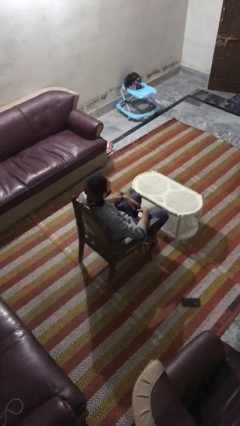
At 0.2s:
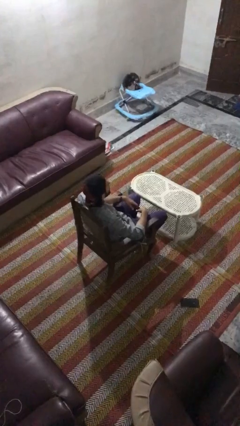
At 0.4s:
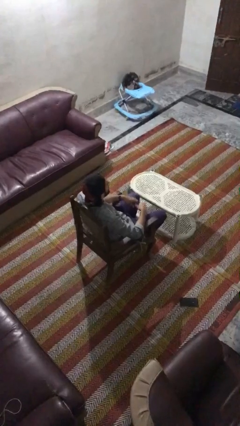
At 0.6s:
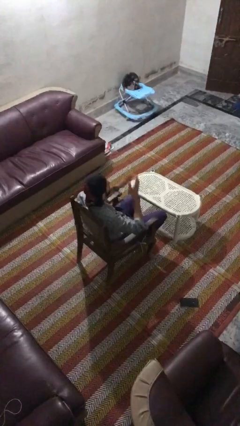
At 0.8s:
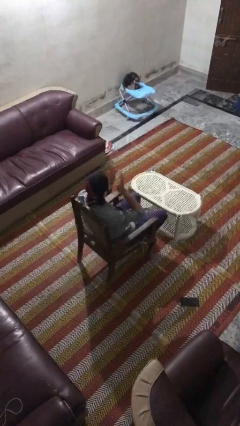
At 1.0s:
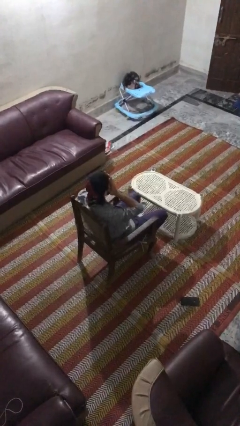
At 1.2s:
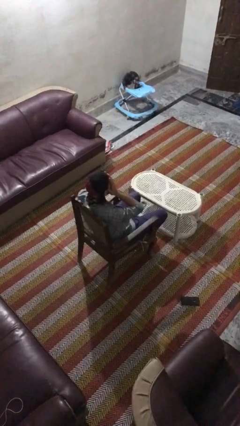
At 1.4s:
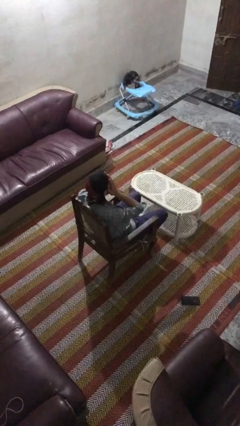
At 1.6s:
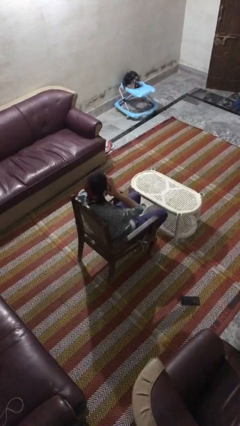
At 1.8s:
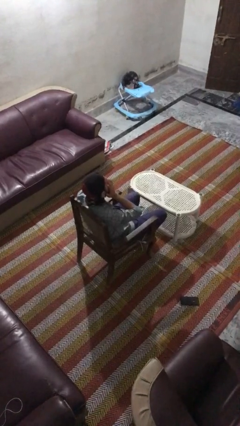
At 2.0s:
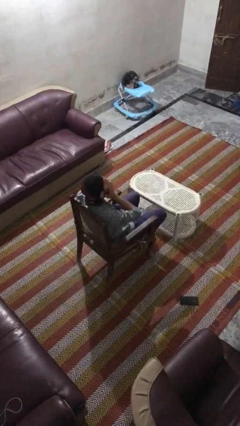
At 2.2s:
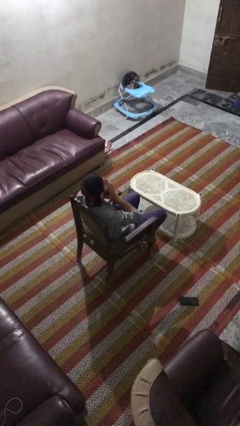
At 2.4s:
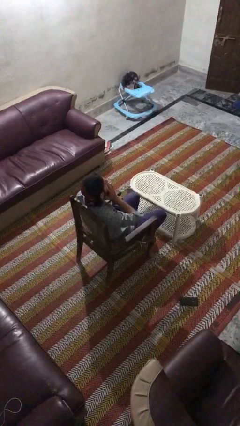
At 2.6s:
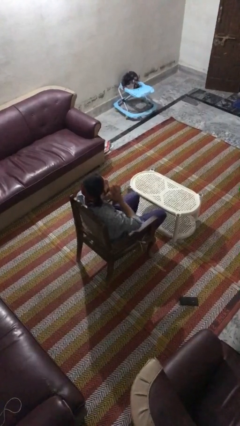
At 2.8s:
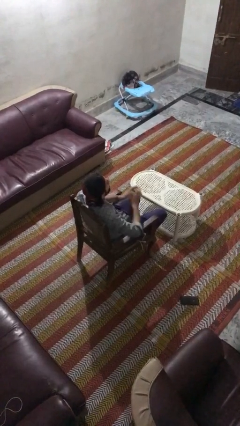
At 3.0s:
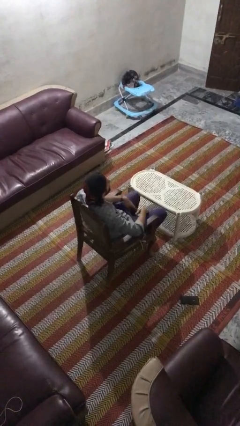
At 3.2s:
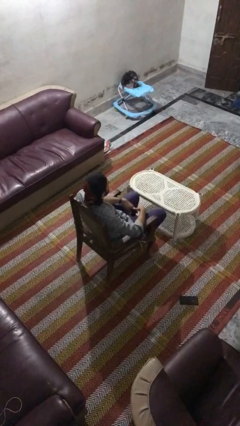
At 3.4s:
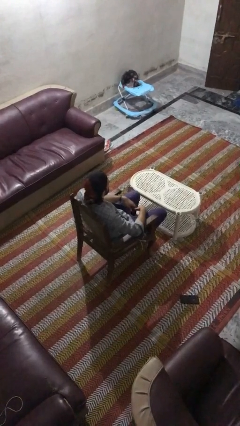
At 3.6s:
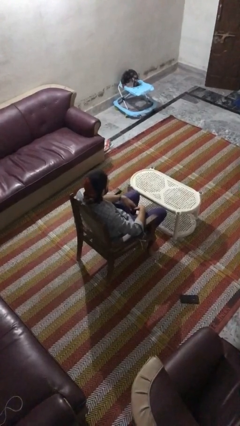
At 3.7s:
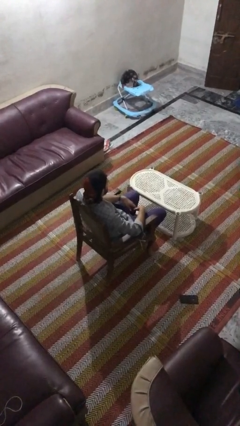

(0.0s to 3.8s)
person covers face with hands

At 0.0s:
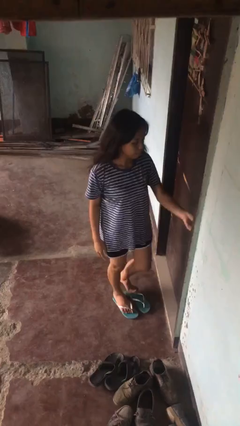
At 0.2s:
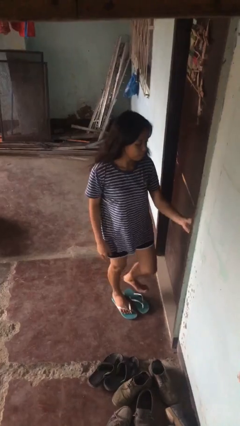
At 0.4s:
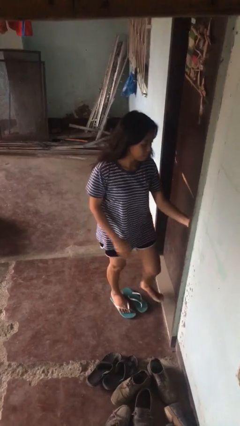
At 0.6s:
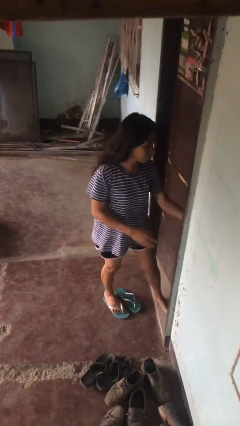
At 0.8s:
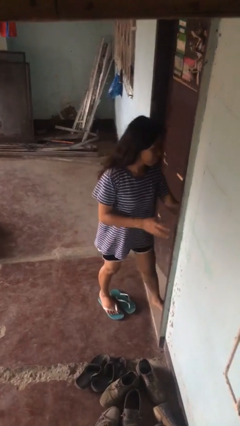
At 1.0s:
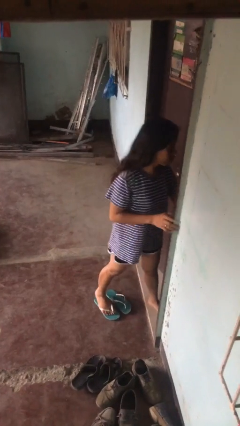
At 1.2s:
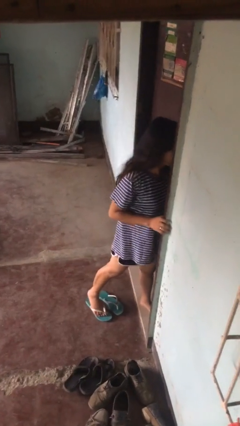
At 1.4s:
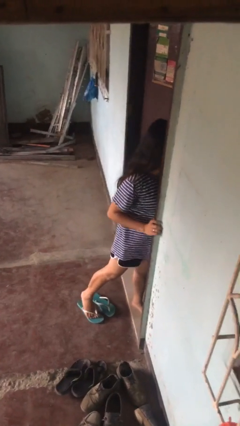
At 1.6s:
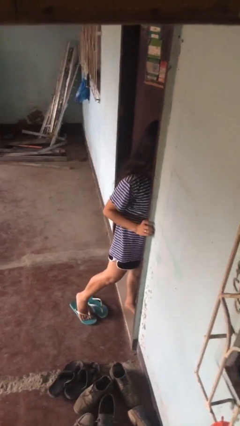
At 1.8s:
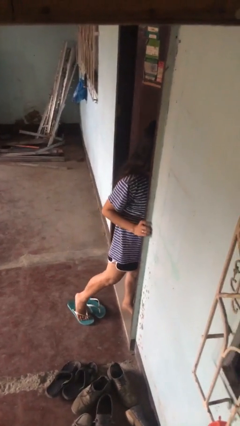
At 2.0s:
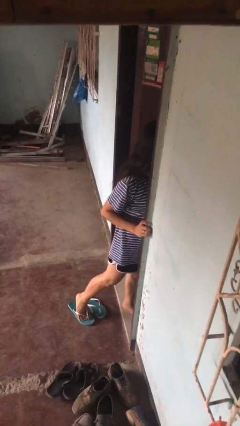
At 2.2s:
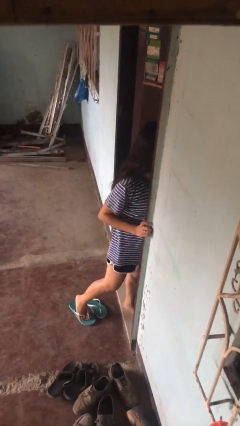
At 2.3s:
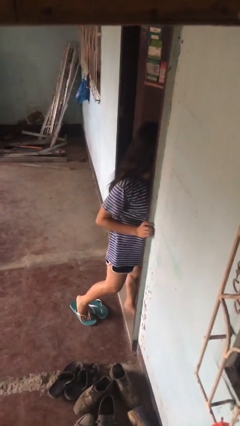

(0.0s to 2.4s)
person opens facility door

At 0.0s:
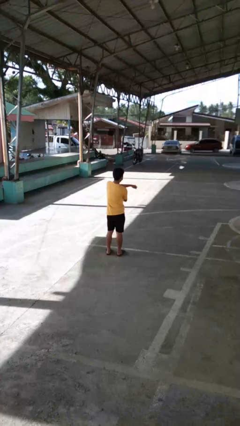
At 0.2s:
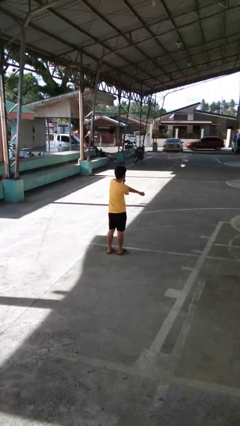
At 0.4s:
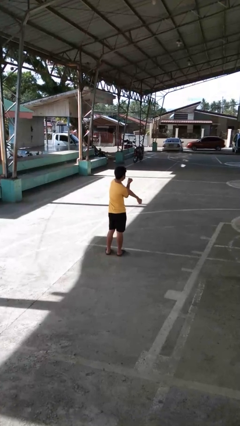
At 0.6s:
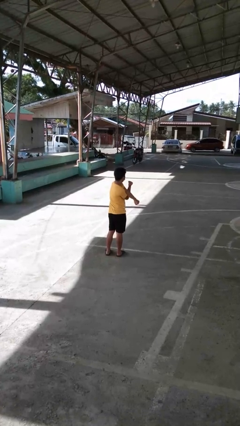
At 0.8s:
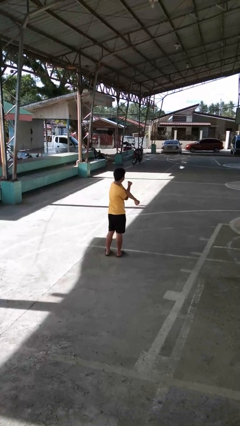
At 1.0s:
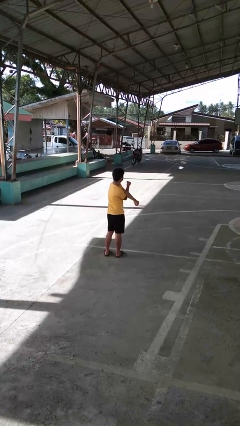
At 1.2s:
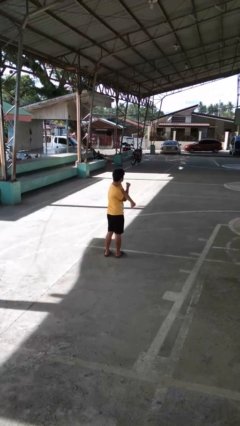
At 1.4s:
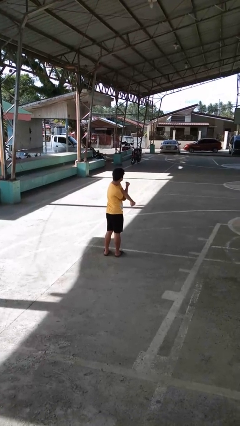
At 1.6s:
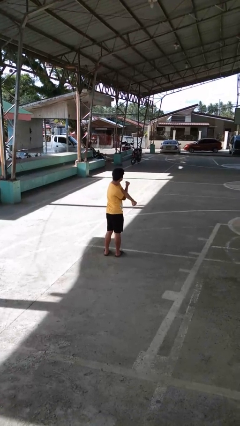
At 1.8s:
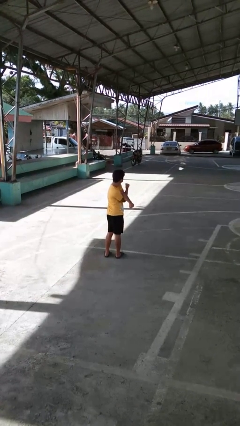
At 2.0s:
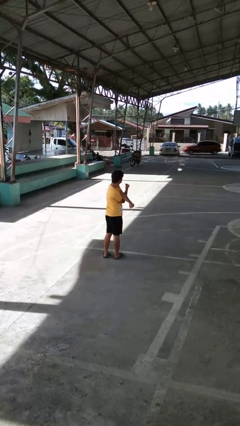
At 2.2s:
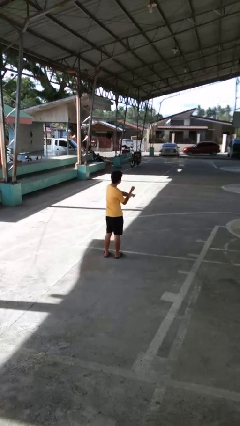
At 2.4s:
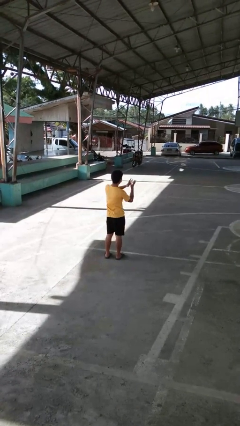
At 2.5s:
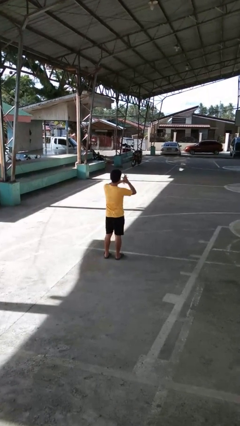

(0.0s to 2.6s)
person stretches arms to side

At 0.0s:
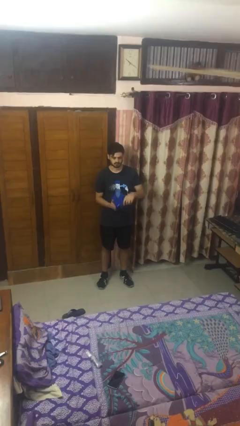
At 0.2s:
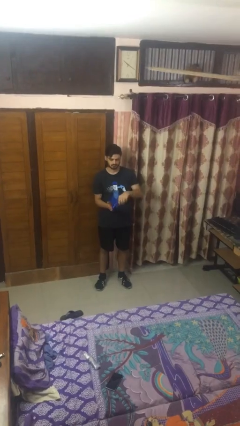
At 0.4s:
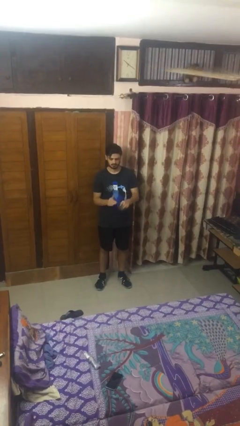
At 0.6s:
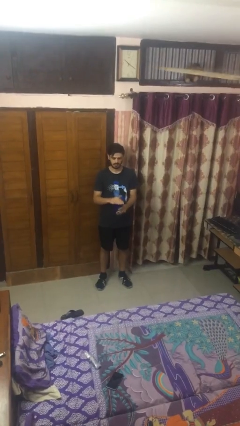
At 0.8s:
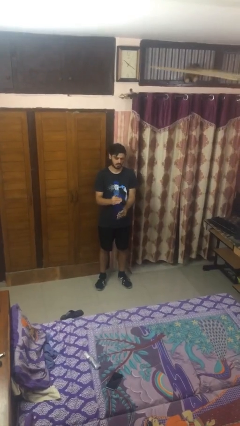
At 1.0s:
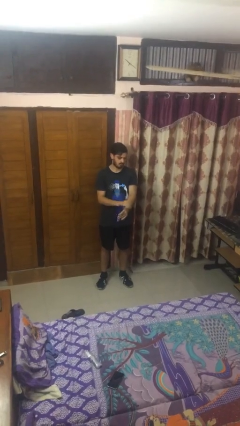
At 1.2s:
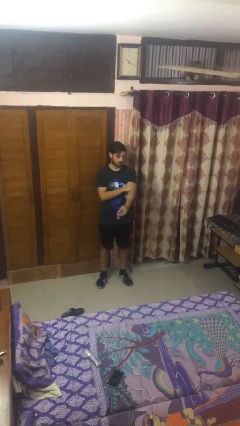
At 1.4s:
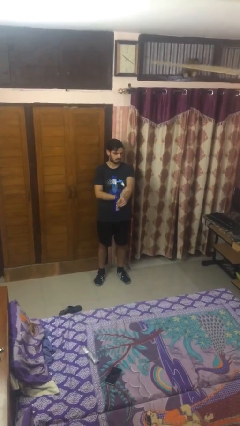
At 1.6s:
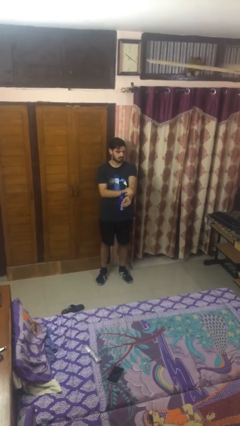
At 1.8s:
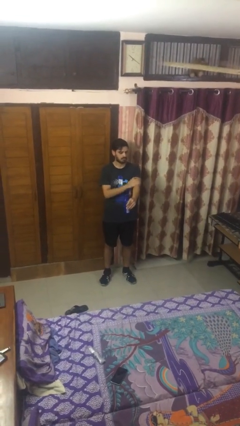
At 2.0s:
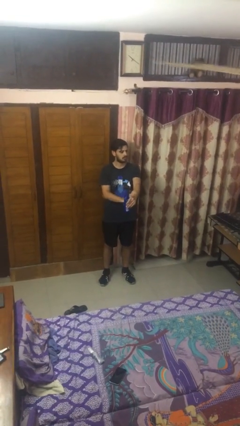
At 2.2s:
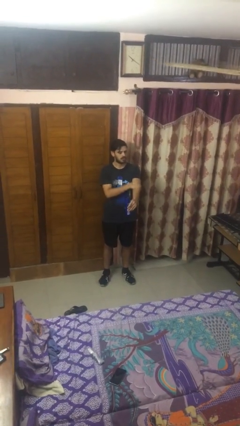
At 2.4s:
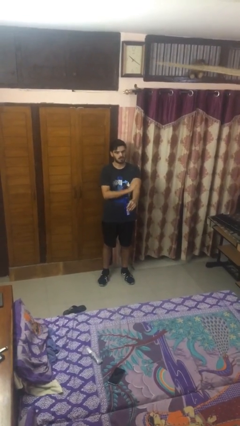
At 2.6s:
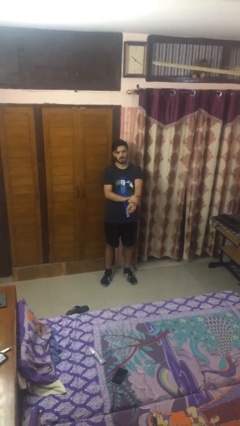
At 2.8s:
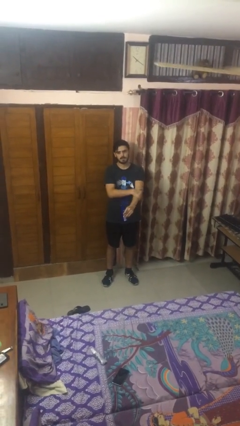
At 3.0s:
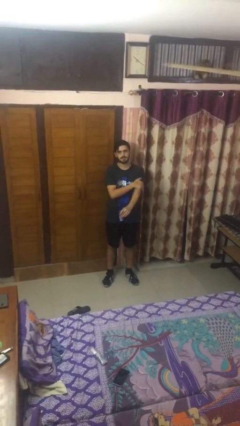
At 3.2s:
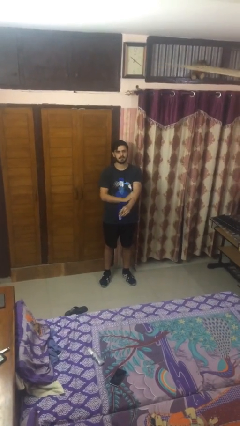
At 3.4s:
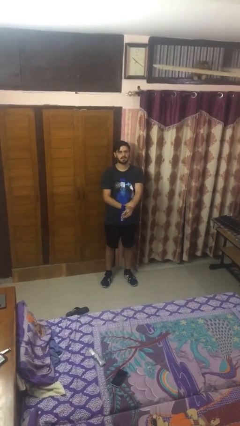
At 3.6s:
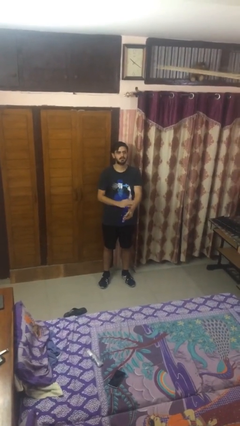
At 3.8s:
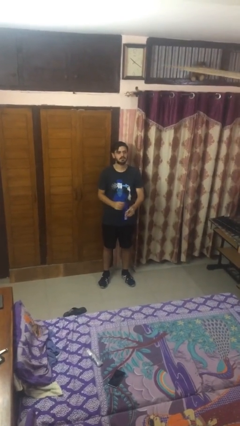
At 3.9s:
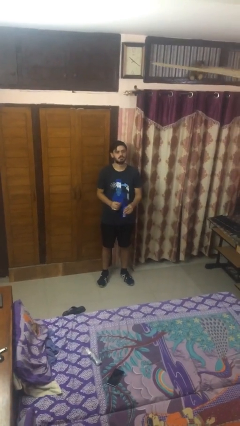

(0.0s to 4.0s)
person applies sunscreen

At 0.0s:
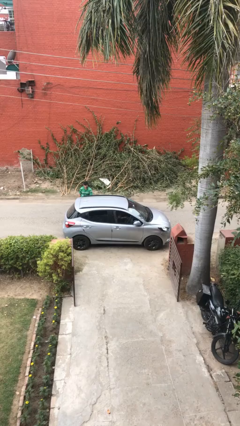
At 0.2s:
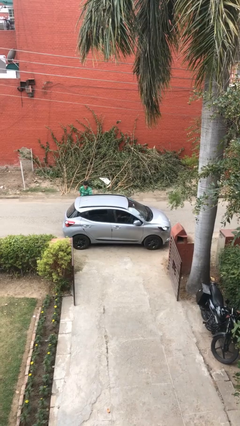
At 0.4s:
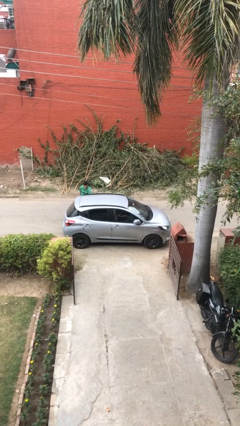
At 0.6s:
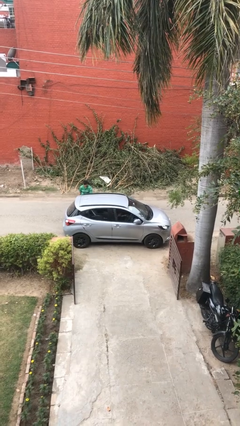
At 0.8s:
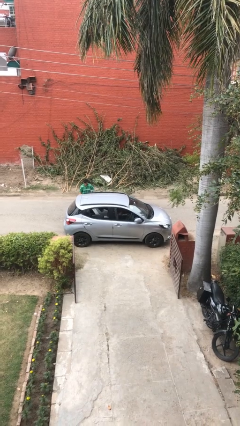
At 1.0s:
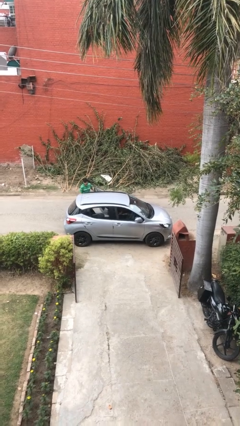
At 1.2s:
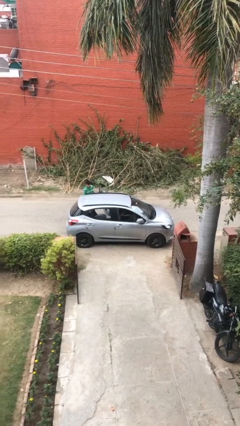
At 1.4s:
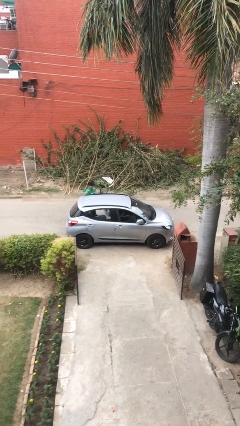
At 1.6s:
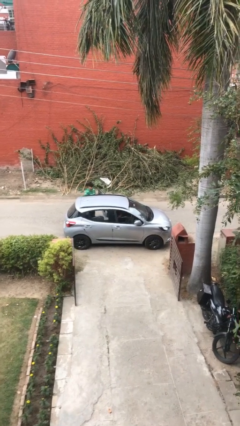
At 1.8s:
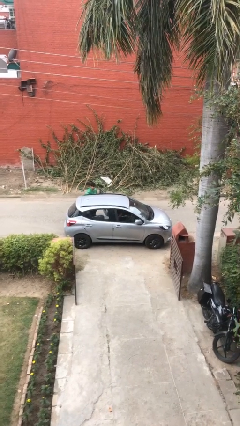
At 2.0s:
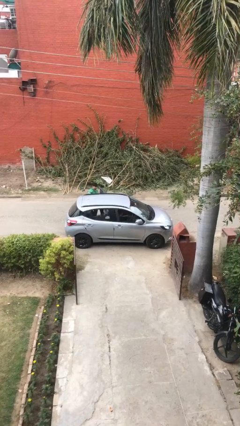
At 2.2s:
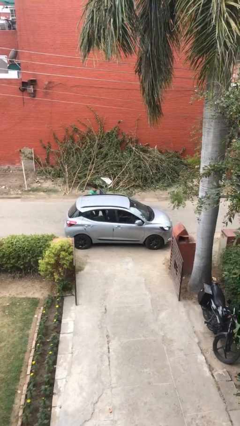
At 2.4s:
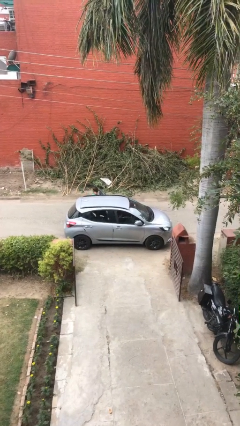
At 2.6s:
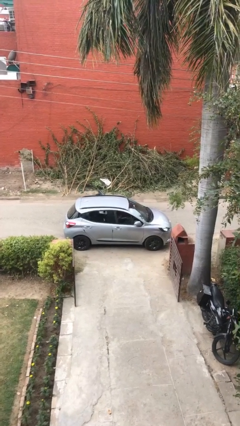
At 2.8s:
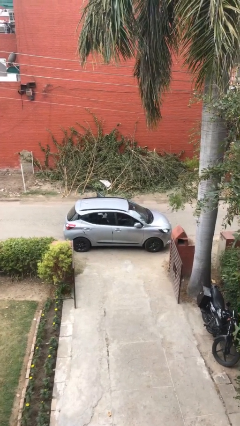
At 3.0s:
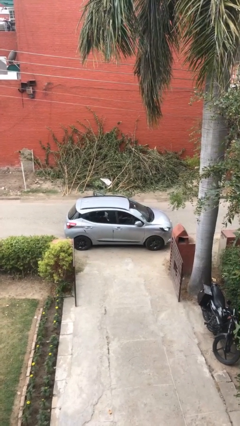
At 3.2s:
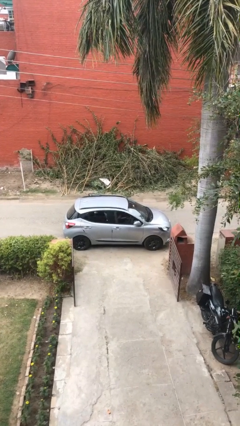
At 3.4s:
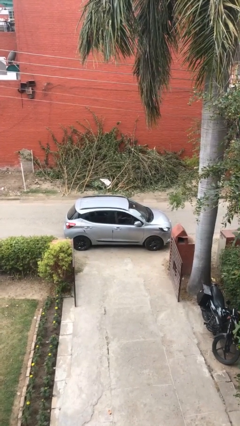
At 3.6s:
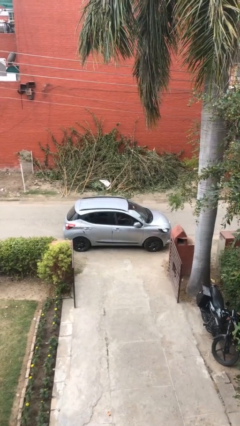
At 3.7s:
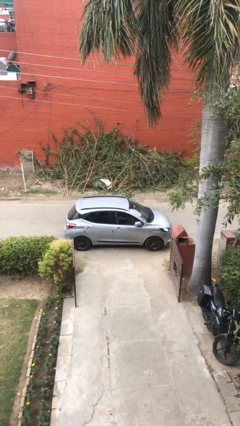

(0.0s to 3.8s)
car picks up person

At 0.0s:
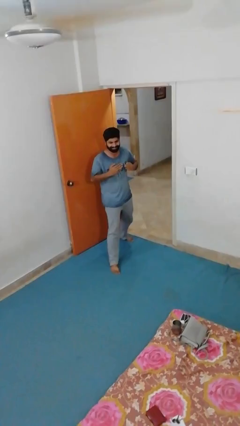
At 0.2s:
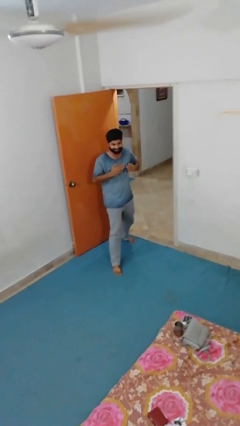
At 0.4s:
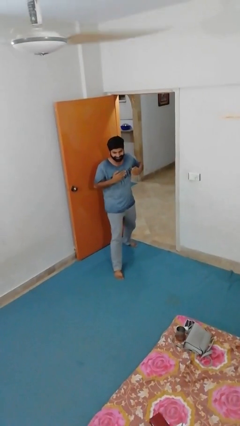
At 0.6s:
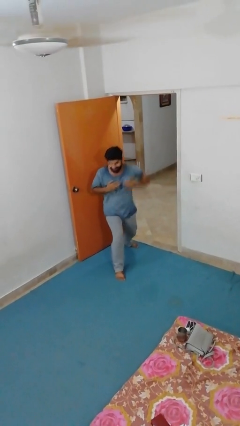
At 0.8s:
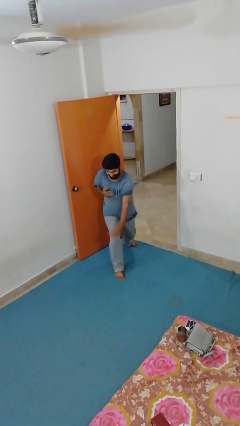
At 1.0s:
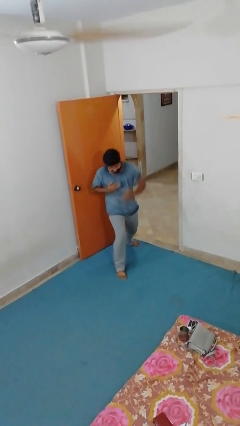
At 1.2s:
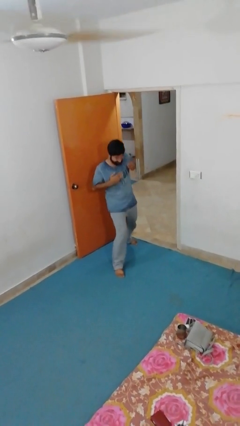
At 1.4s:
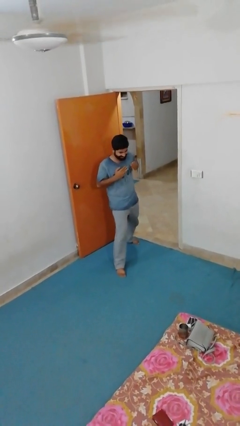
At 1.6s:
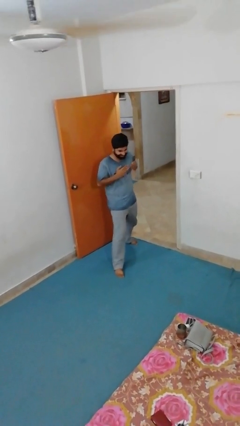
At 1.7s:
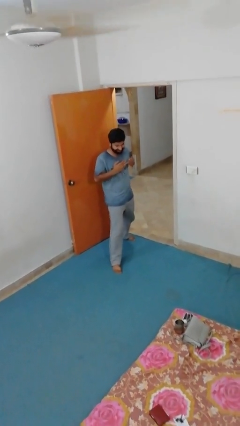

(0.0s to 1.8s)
person karate chop
